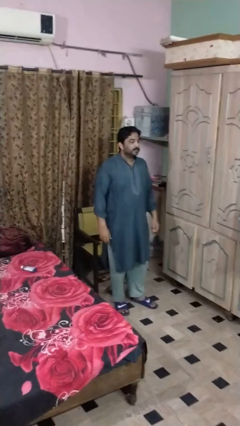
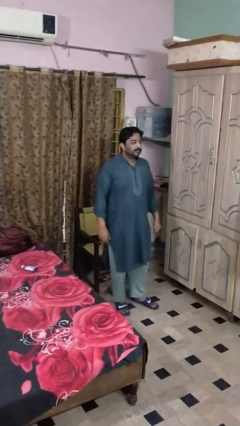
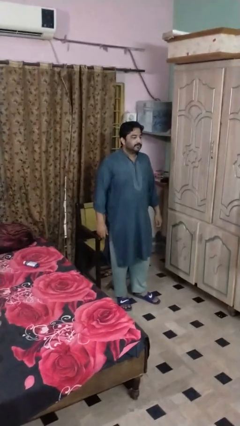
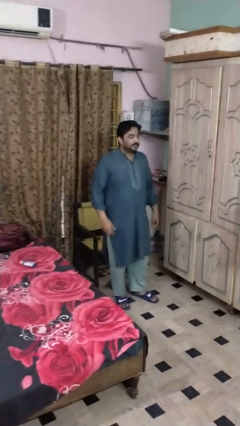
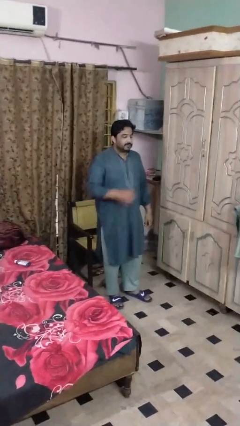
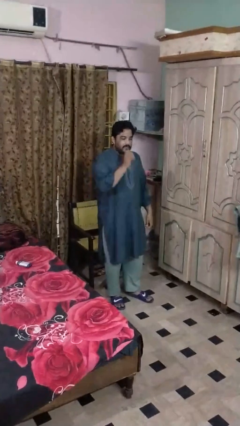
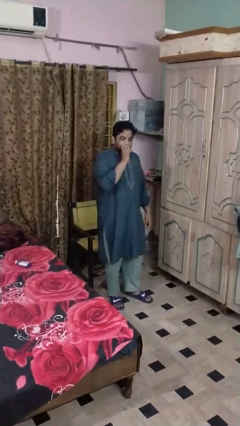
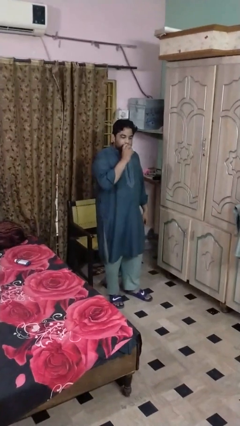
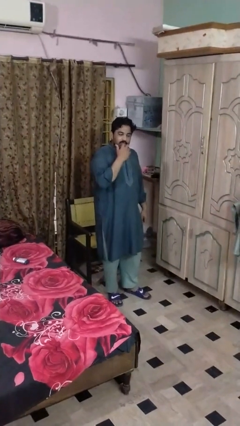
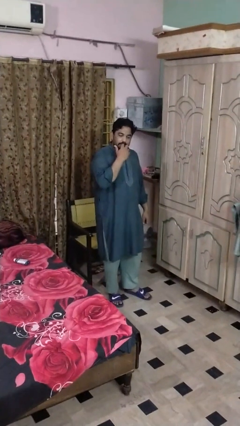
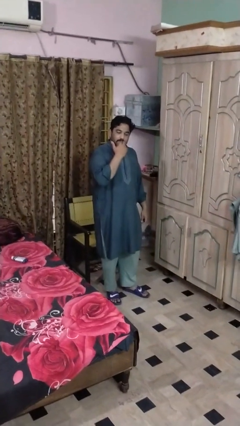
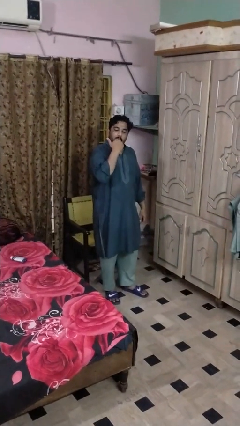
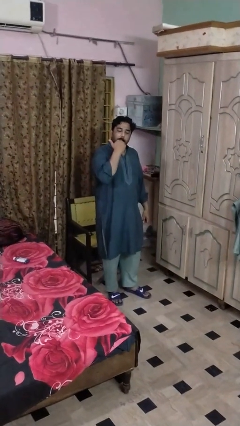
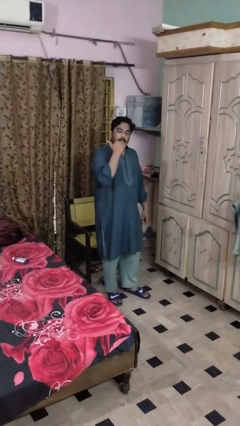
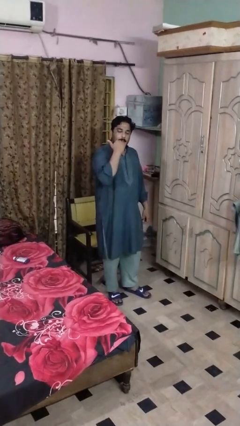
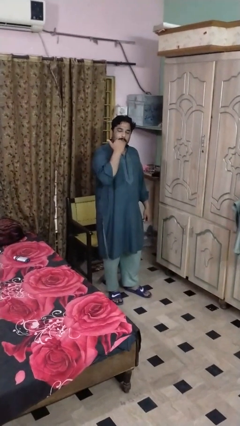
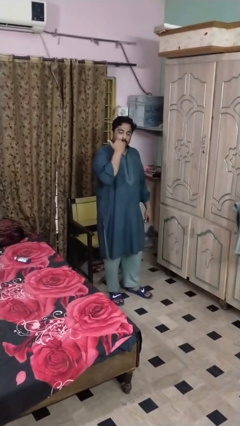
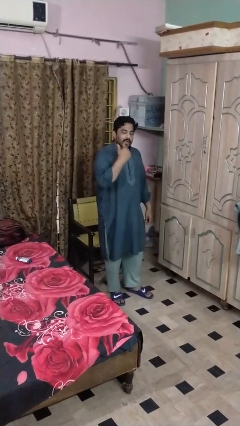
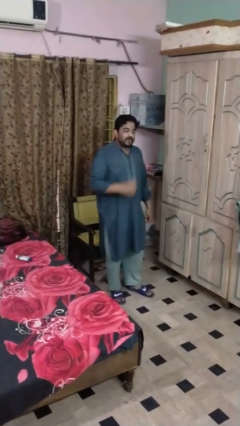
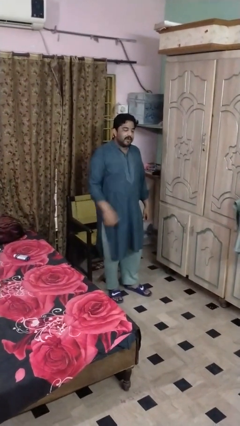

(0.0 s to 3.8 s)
person licks fingers

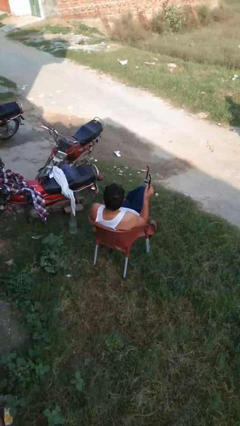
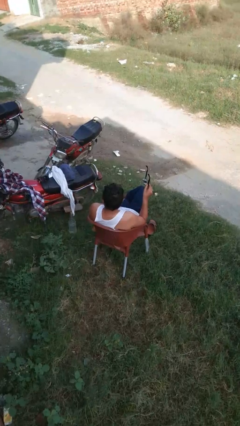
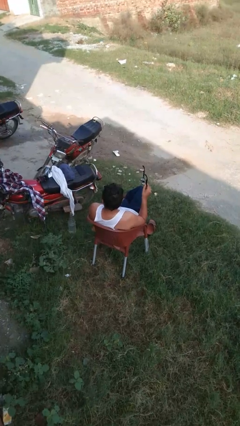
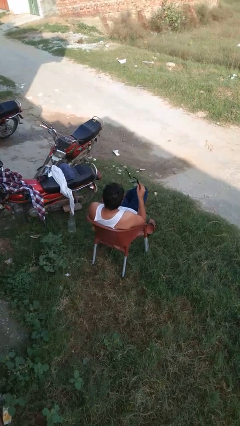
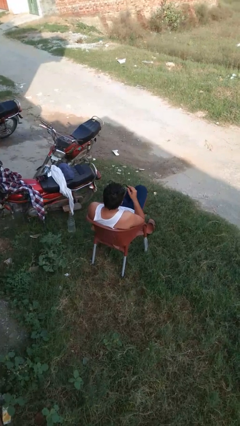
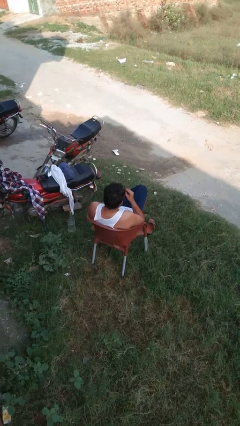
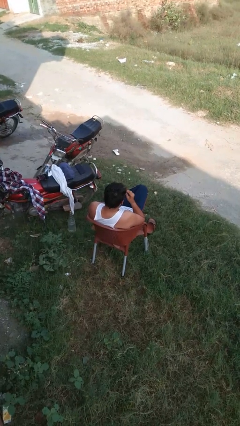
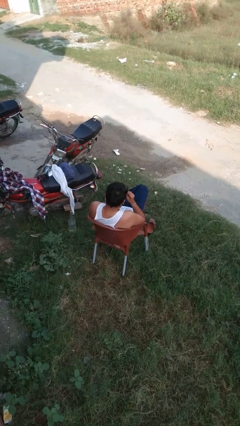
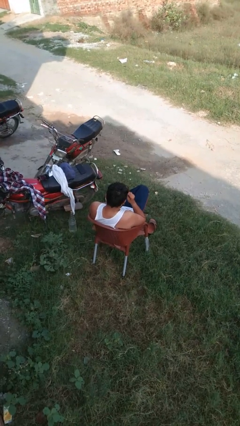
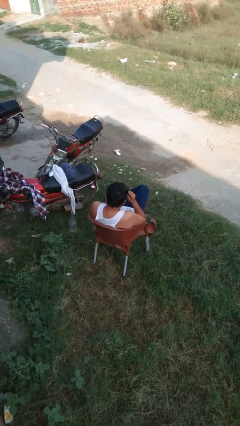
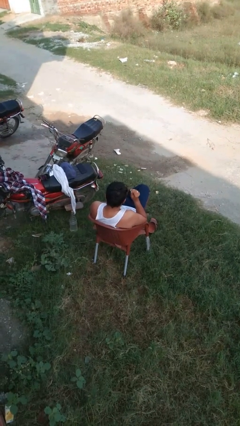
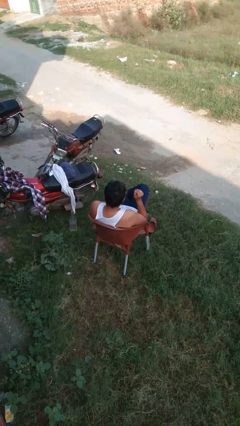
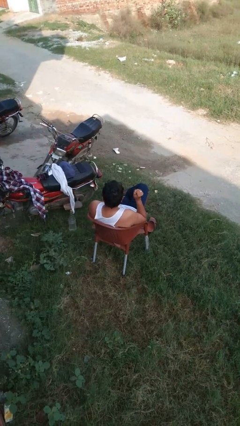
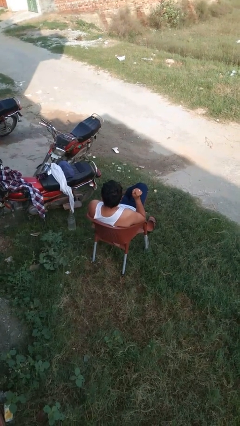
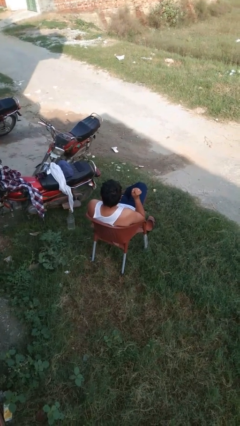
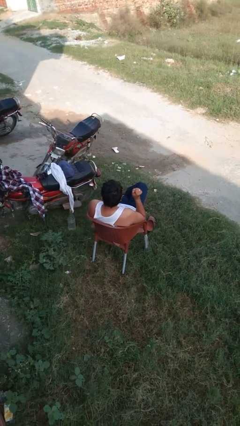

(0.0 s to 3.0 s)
person puts on glasses

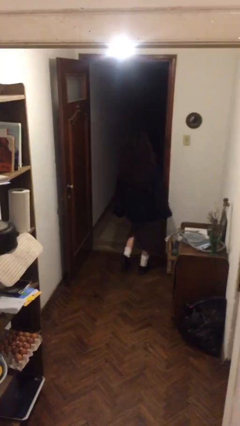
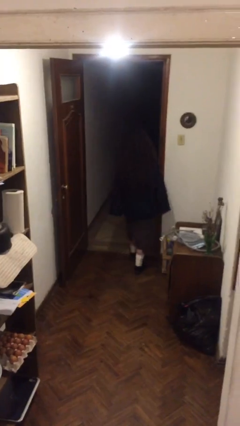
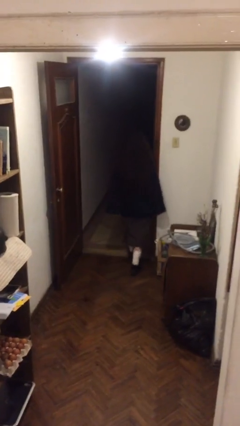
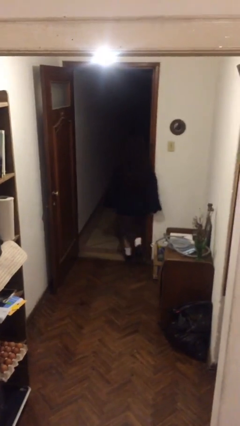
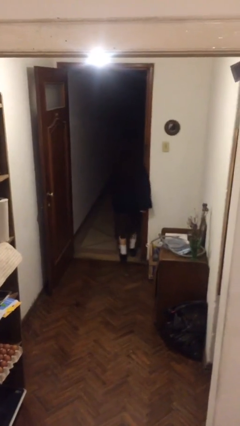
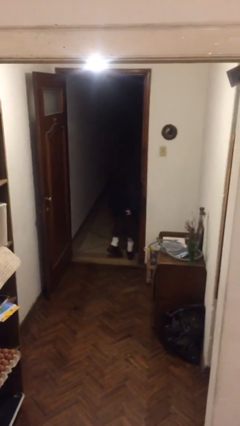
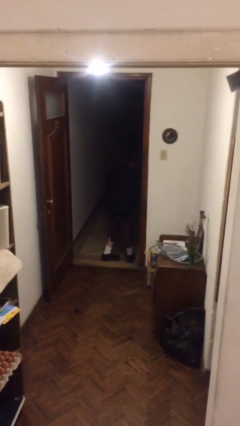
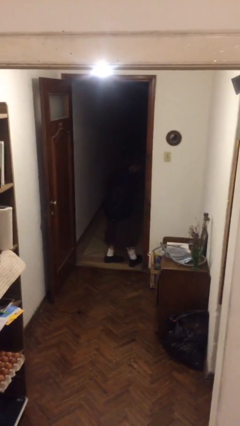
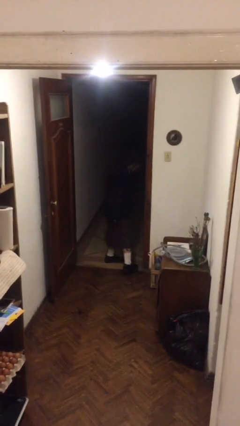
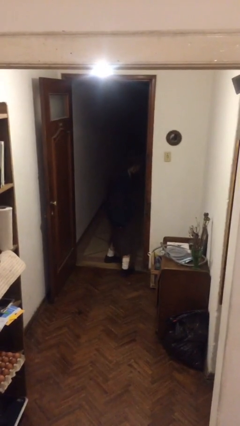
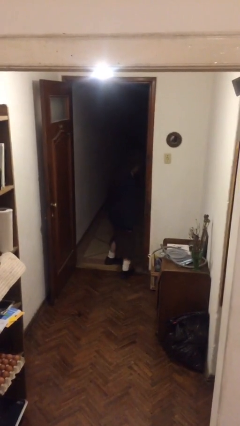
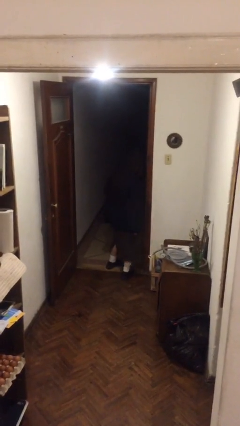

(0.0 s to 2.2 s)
person bumps into wall

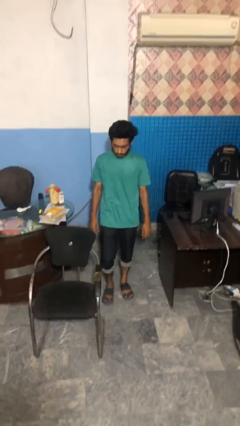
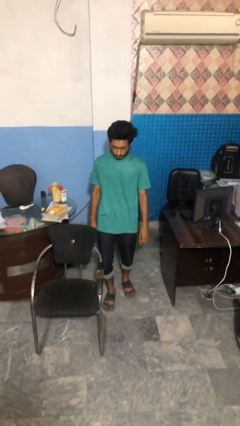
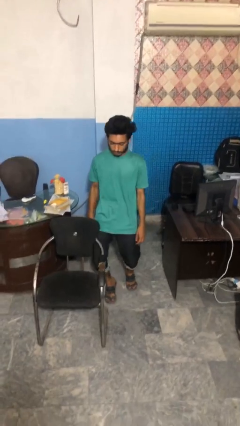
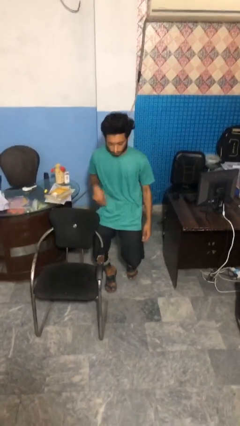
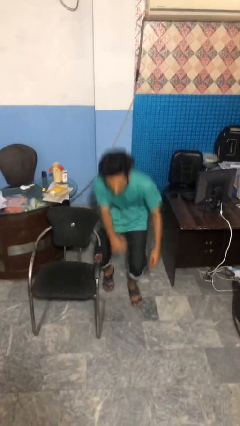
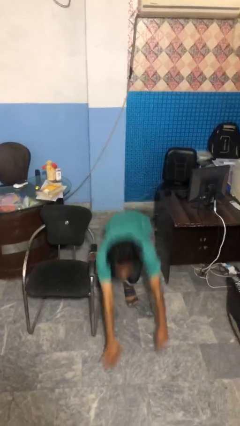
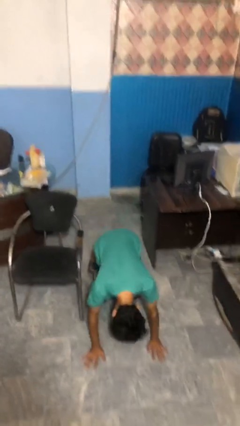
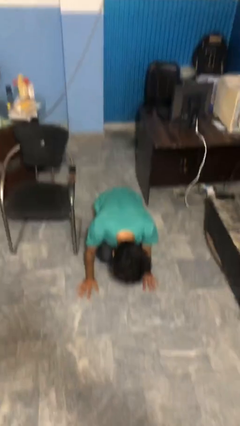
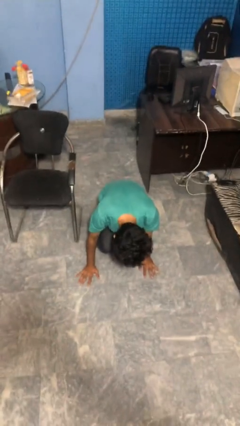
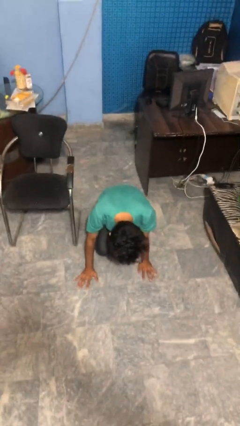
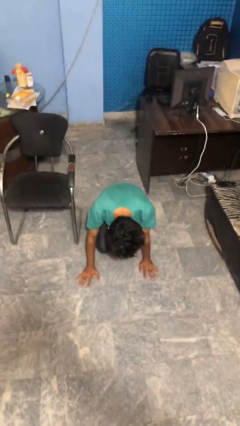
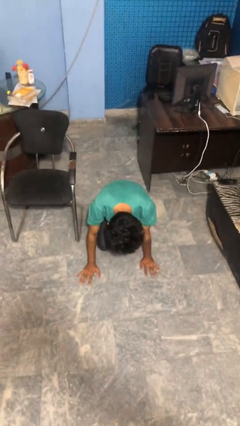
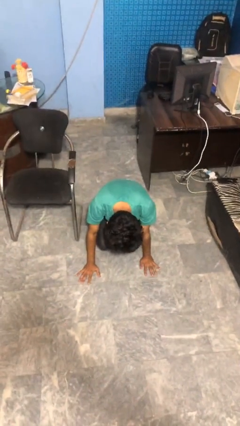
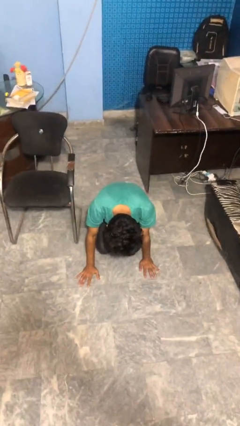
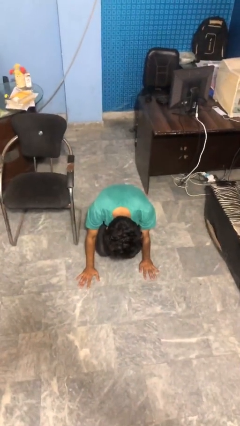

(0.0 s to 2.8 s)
person trips on object on floor

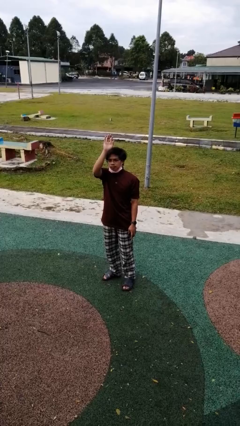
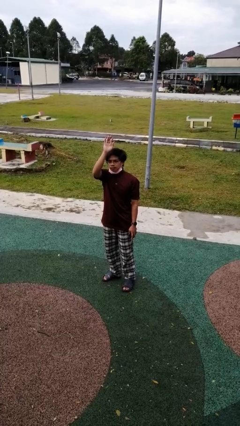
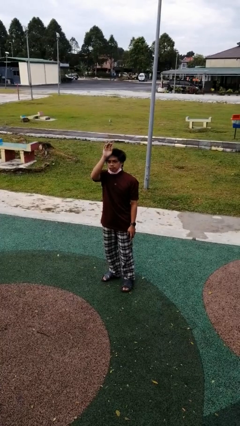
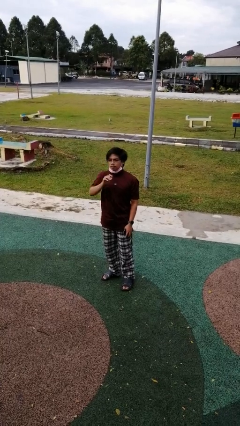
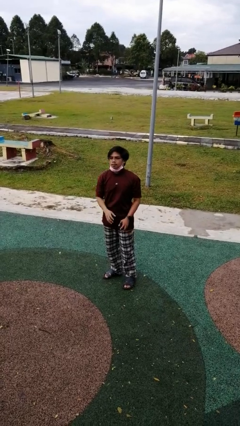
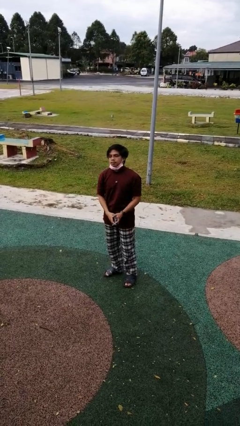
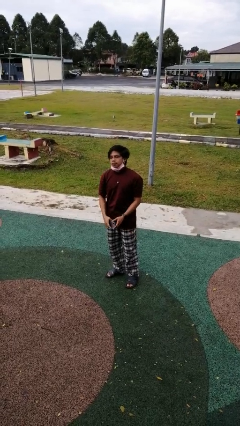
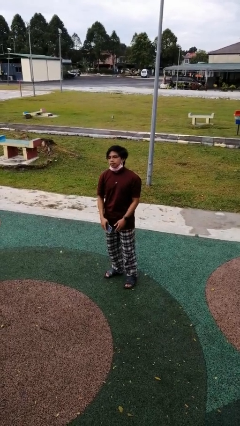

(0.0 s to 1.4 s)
person gestures lower hand

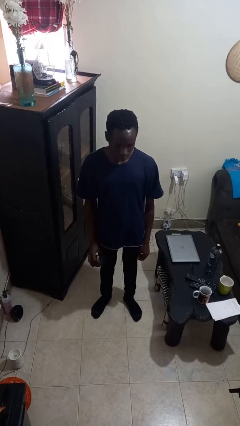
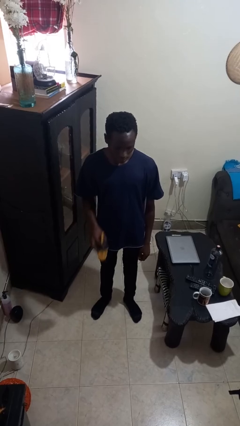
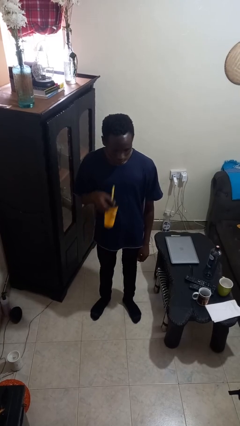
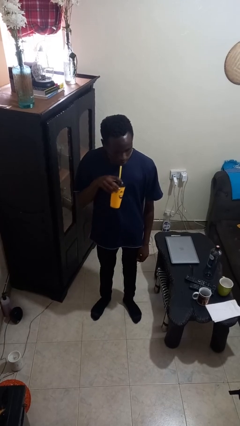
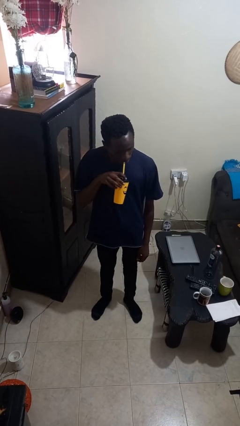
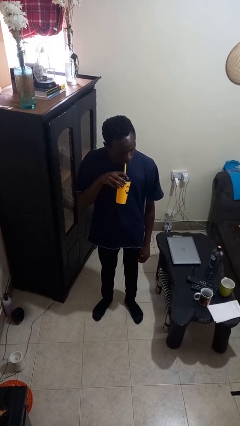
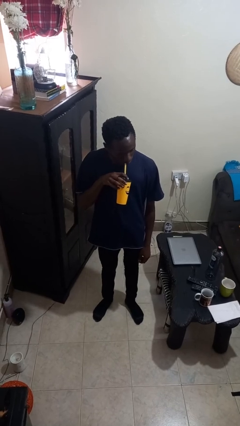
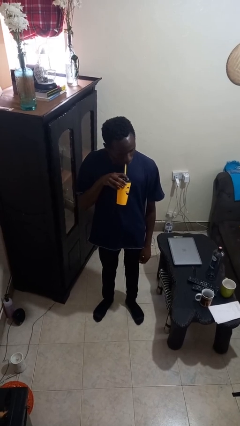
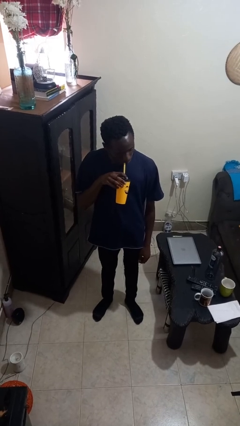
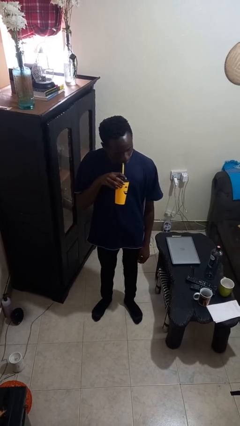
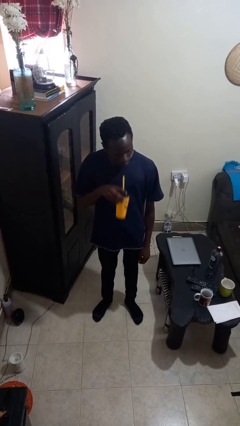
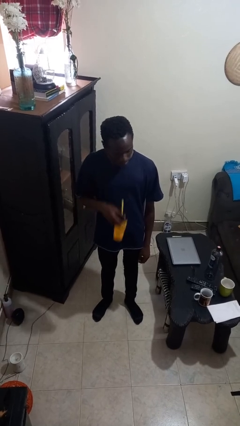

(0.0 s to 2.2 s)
person drinks from straw

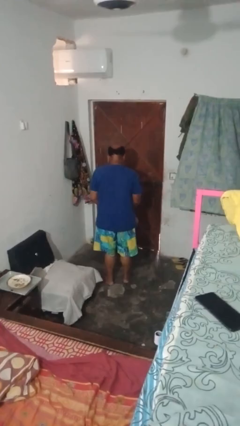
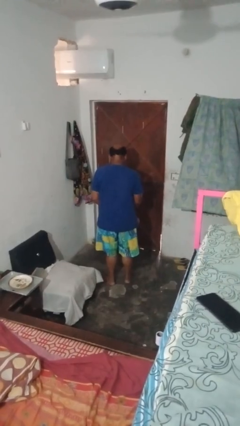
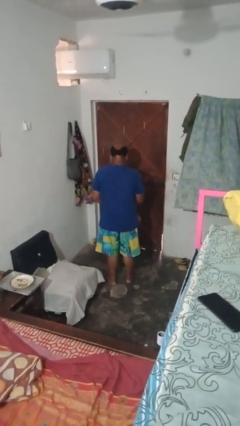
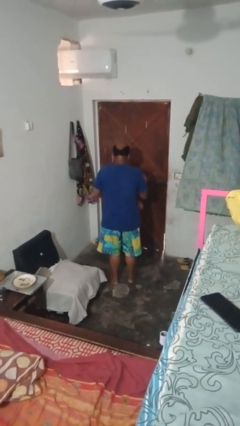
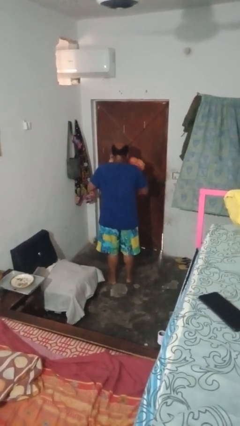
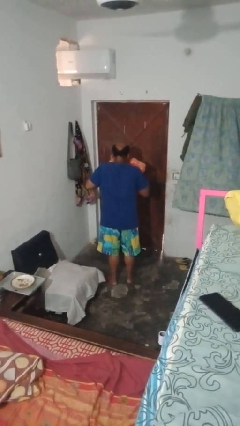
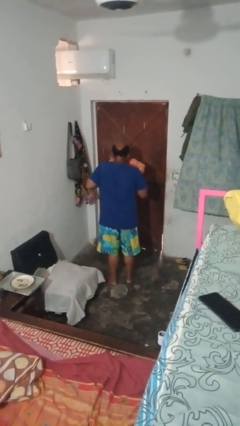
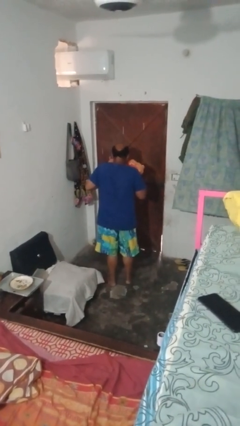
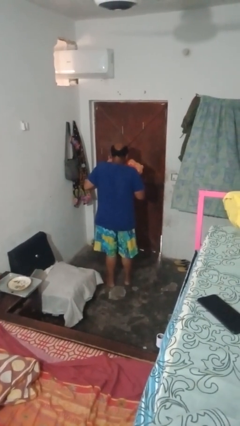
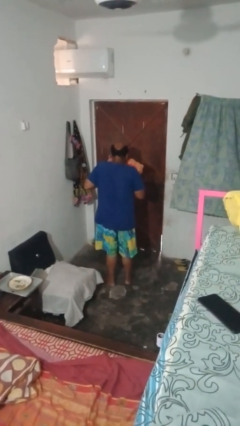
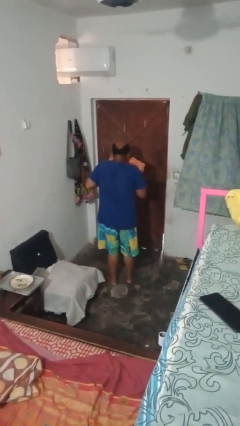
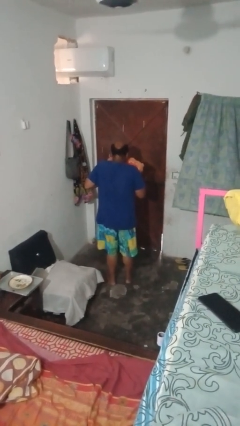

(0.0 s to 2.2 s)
person hugs stuffed animal
